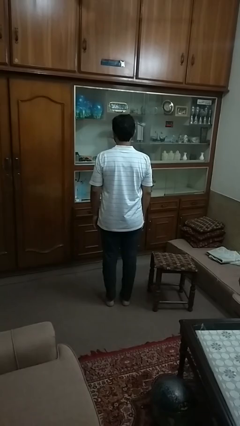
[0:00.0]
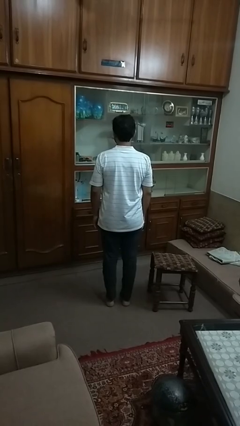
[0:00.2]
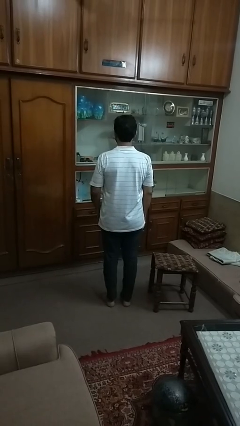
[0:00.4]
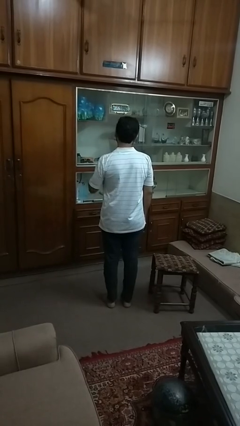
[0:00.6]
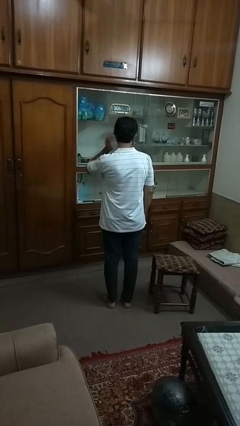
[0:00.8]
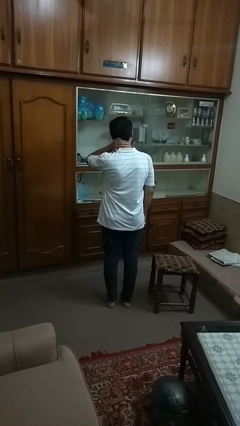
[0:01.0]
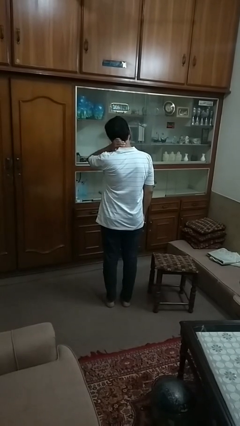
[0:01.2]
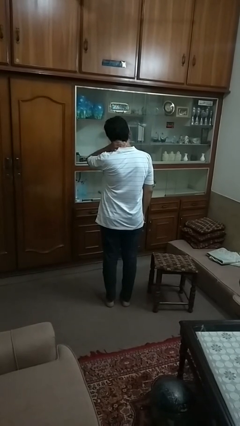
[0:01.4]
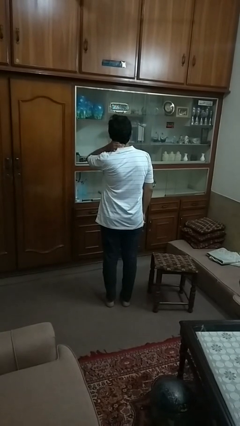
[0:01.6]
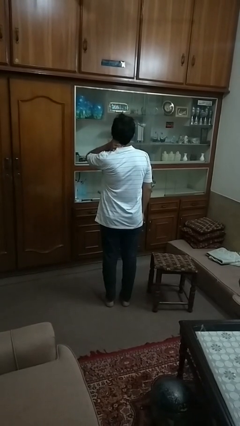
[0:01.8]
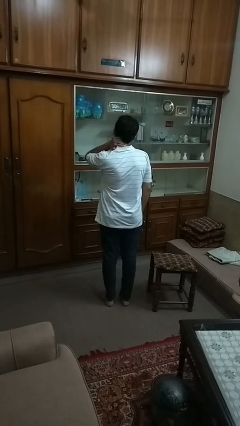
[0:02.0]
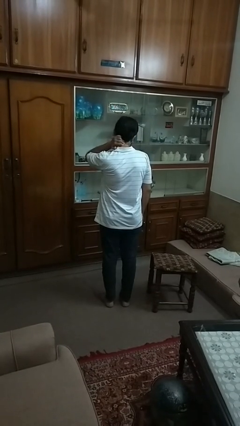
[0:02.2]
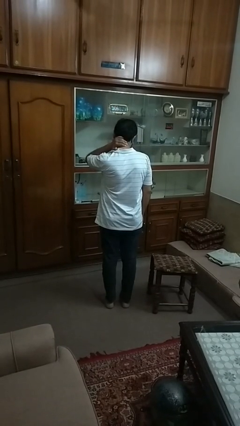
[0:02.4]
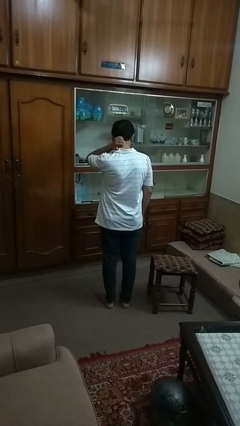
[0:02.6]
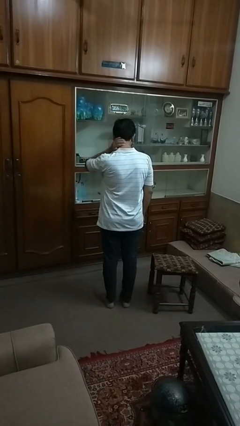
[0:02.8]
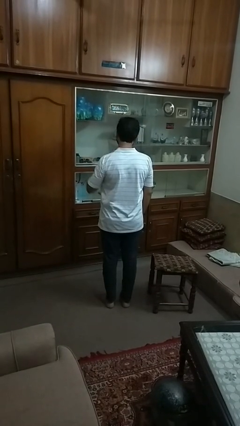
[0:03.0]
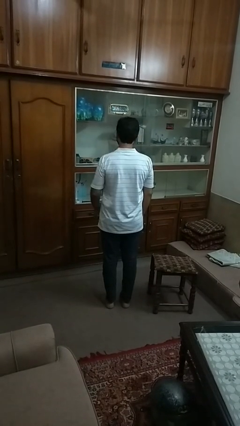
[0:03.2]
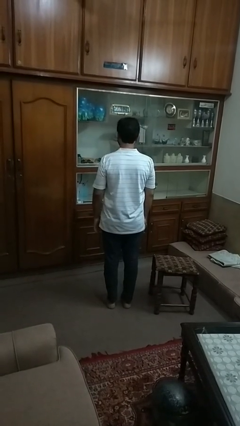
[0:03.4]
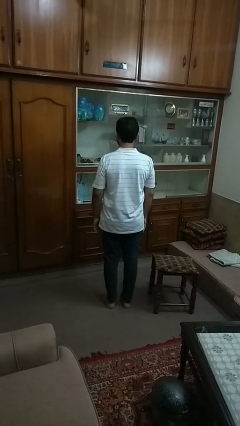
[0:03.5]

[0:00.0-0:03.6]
person rubs neck

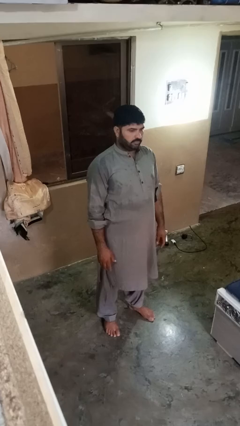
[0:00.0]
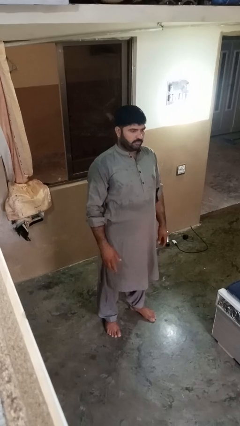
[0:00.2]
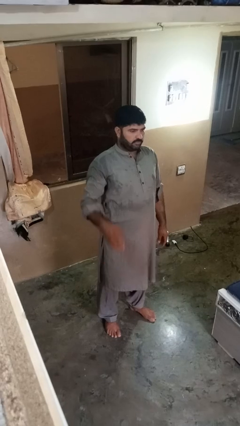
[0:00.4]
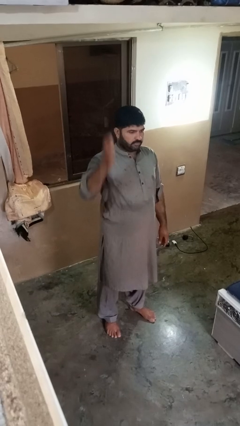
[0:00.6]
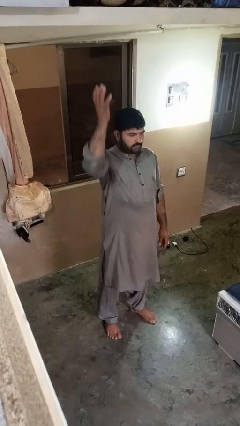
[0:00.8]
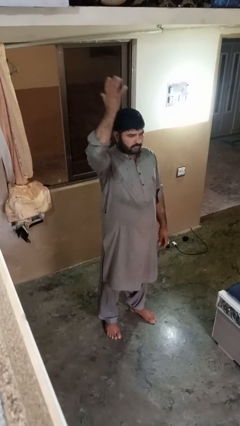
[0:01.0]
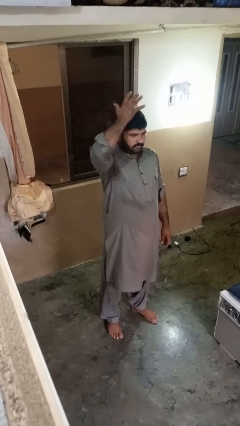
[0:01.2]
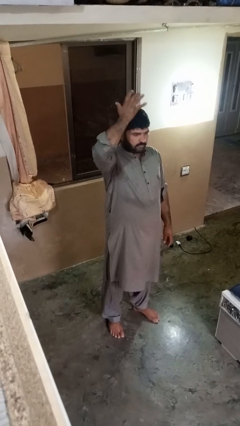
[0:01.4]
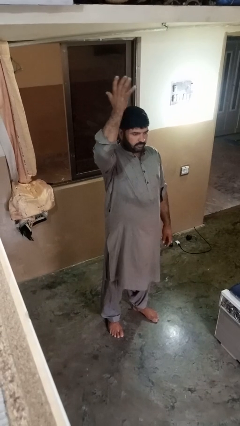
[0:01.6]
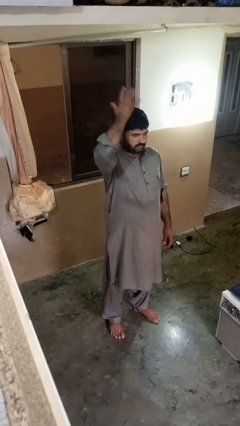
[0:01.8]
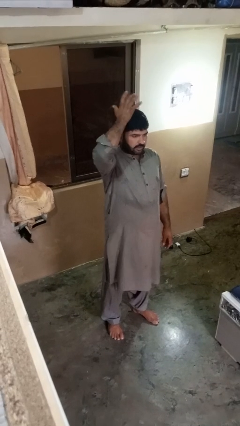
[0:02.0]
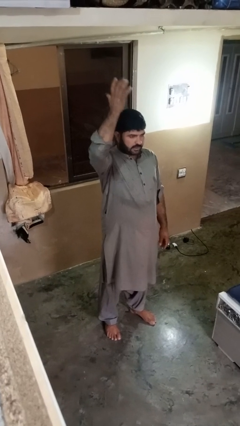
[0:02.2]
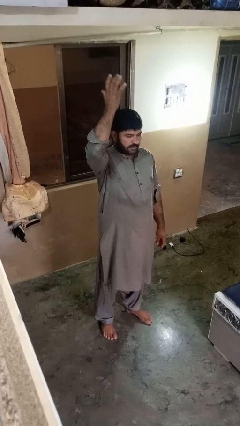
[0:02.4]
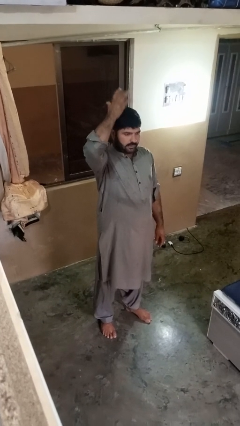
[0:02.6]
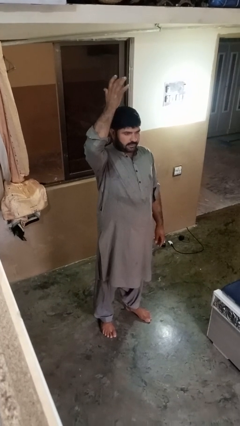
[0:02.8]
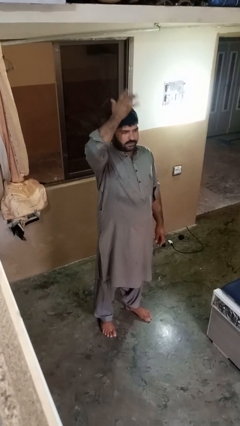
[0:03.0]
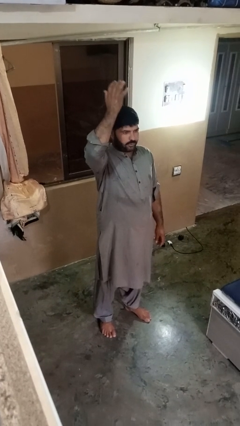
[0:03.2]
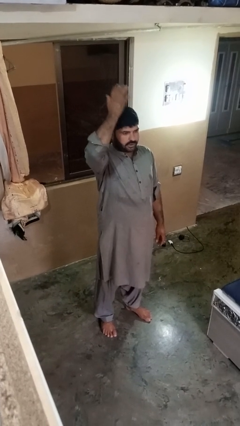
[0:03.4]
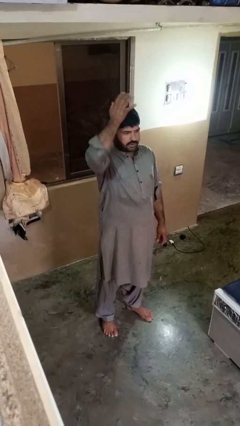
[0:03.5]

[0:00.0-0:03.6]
person pats head

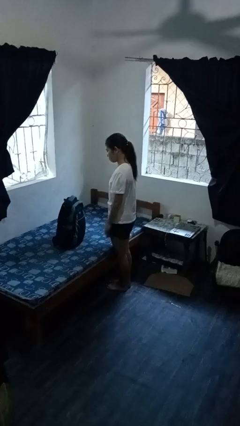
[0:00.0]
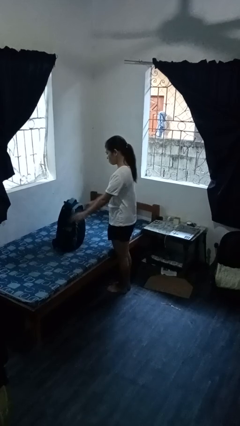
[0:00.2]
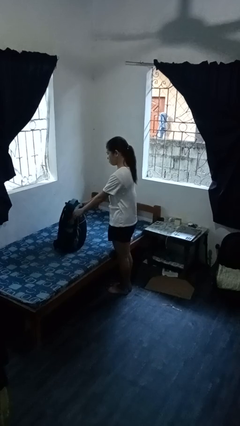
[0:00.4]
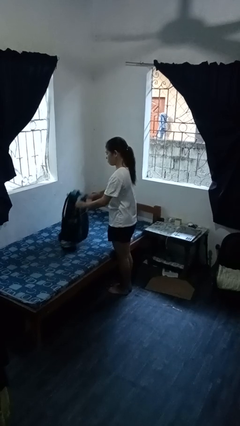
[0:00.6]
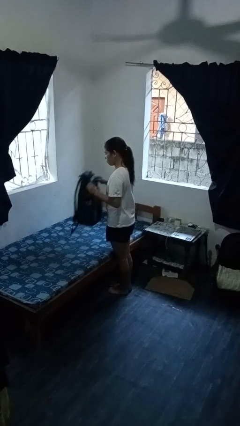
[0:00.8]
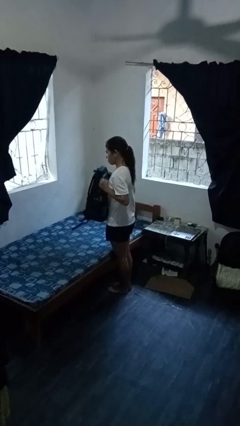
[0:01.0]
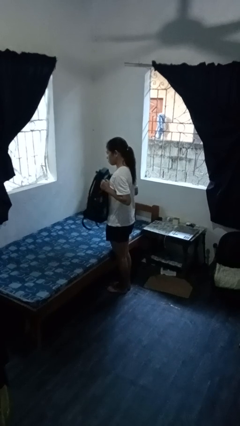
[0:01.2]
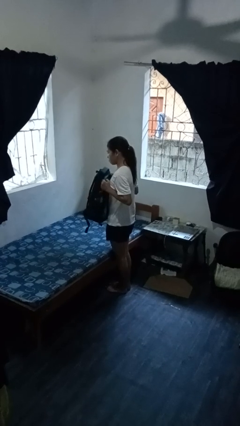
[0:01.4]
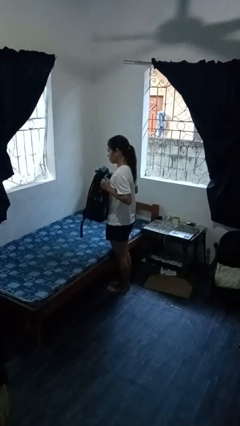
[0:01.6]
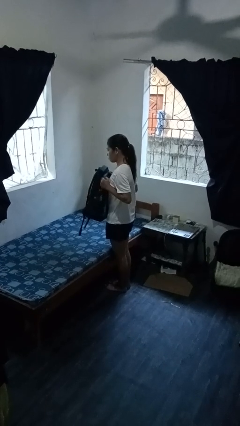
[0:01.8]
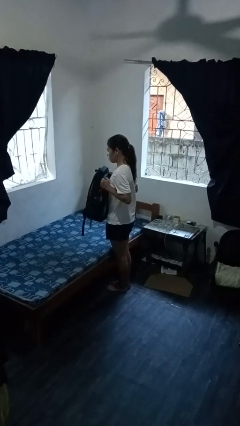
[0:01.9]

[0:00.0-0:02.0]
person picks up object from bed

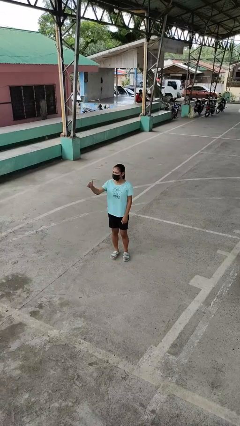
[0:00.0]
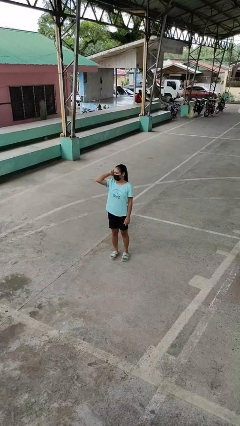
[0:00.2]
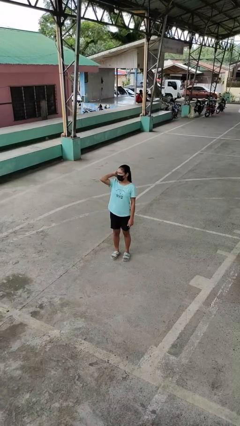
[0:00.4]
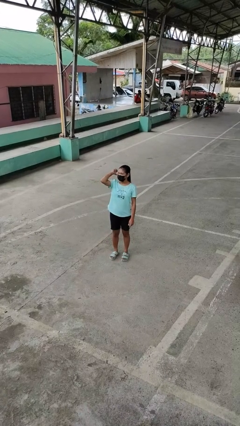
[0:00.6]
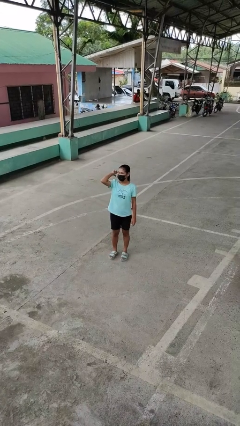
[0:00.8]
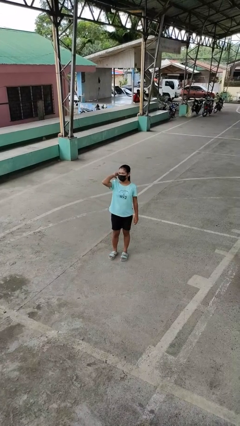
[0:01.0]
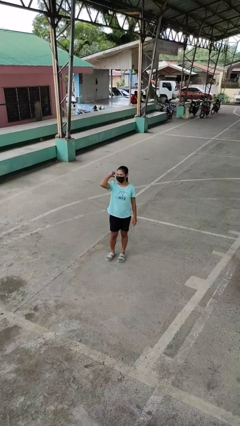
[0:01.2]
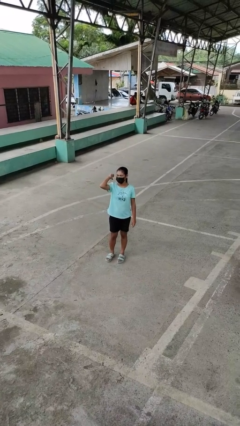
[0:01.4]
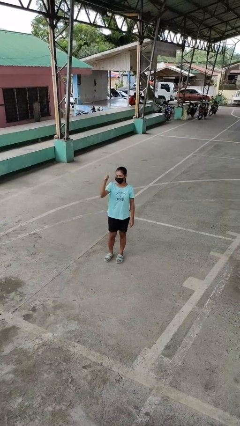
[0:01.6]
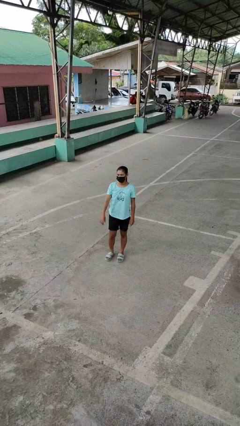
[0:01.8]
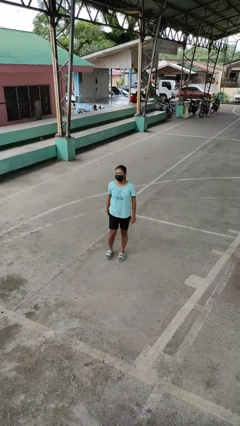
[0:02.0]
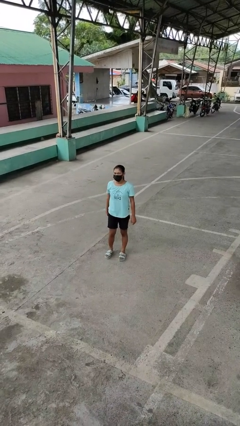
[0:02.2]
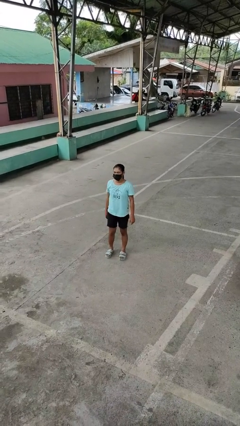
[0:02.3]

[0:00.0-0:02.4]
person gestures behind me

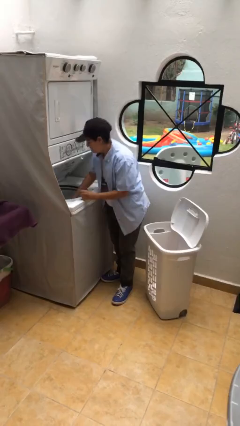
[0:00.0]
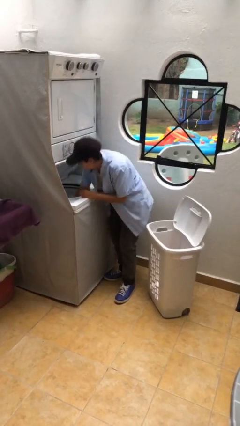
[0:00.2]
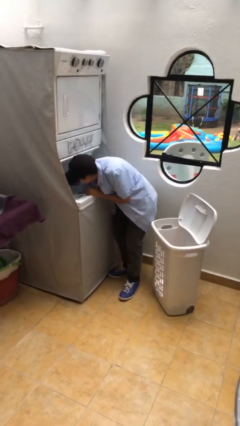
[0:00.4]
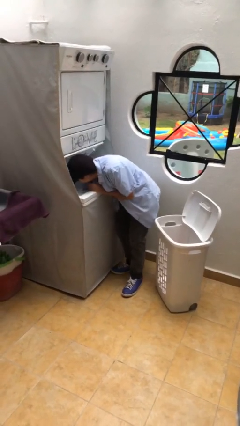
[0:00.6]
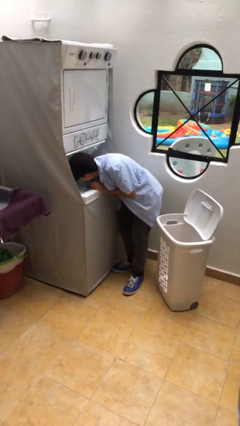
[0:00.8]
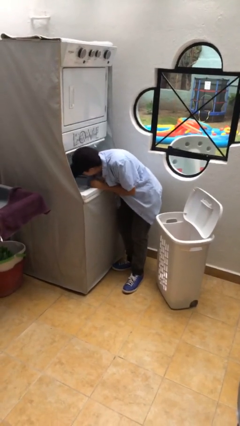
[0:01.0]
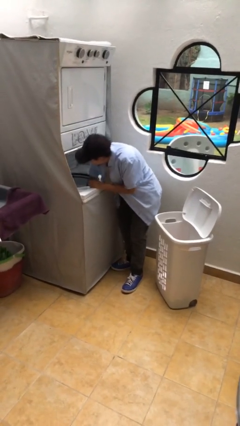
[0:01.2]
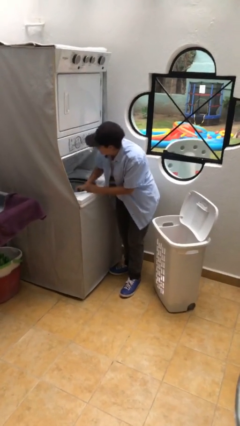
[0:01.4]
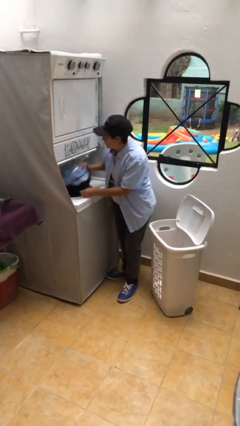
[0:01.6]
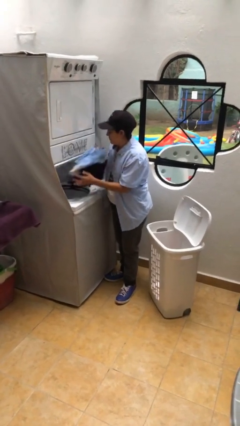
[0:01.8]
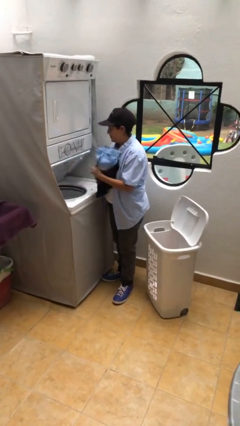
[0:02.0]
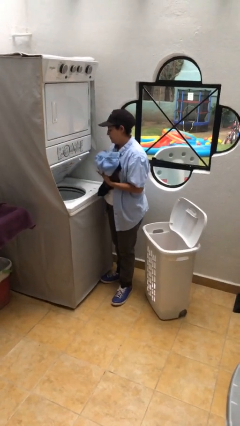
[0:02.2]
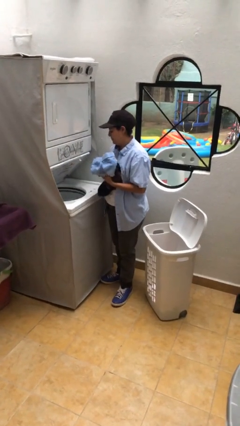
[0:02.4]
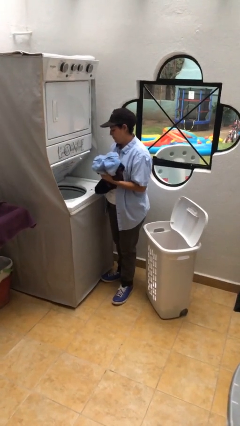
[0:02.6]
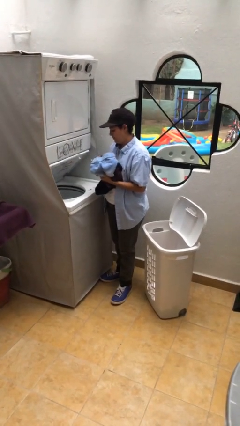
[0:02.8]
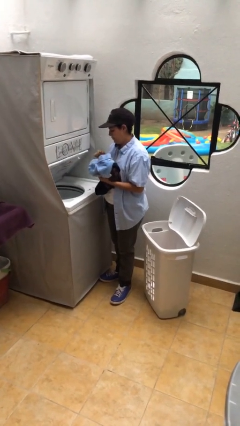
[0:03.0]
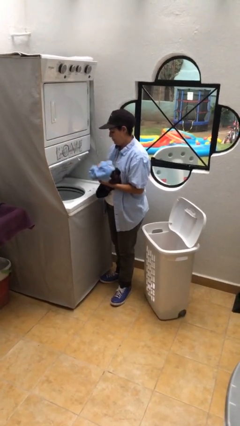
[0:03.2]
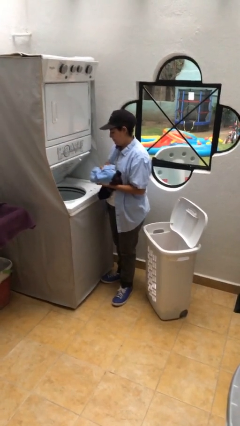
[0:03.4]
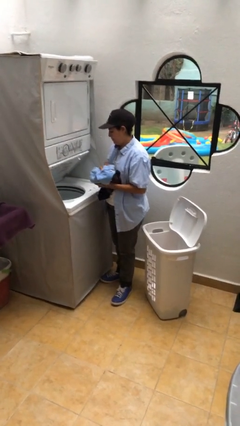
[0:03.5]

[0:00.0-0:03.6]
person unloads clotheswasher

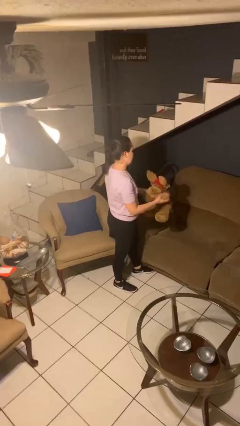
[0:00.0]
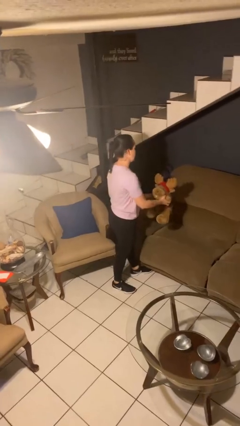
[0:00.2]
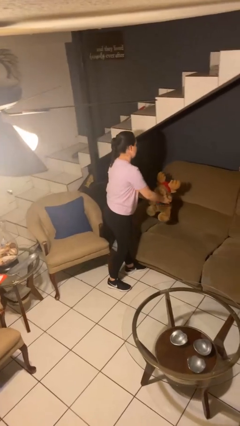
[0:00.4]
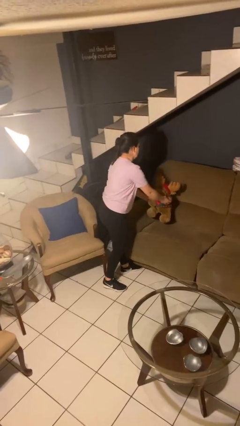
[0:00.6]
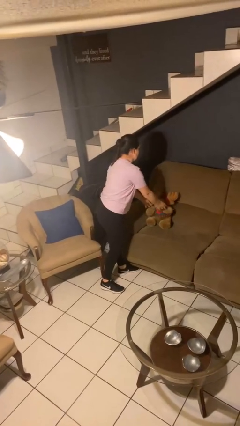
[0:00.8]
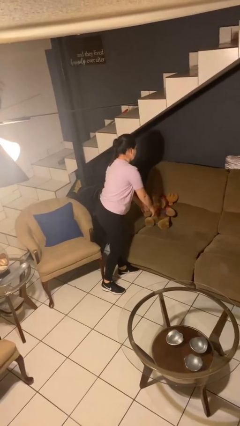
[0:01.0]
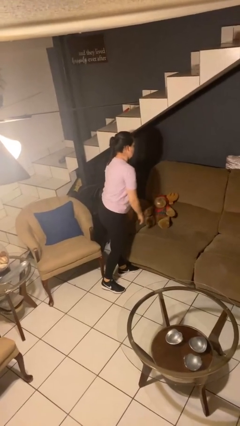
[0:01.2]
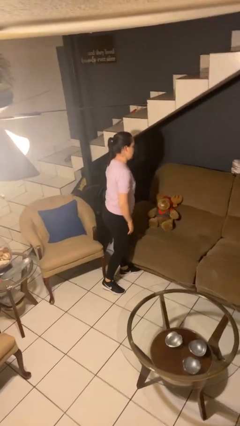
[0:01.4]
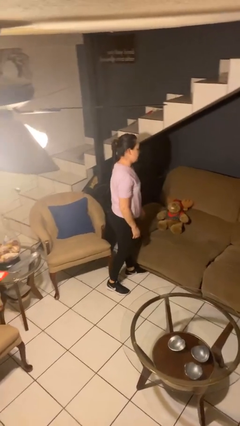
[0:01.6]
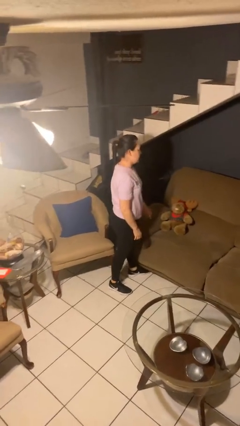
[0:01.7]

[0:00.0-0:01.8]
person puts down object on couch

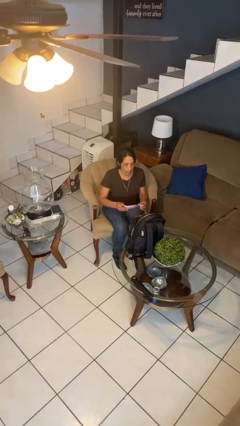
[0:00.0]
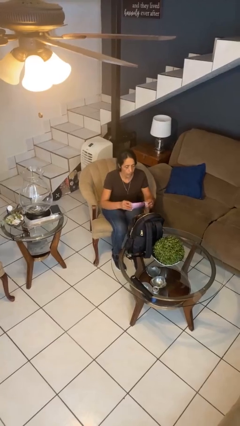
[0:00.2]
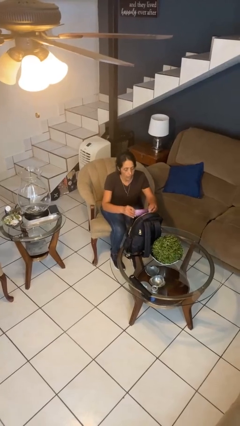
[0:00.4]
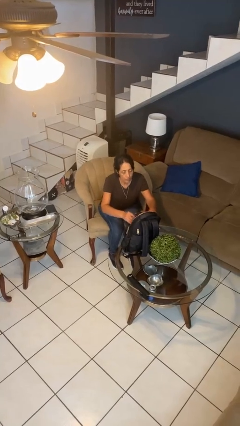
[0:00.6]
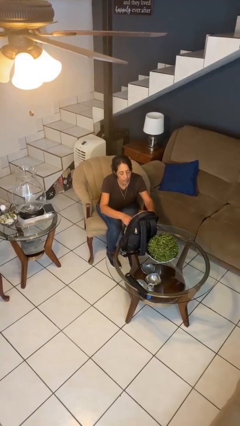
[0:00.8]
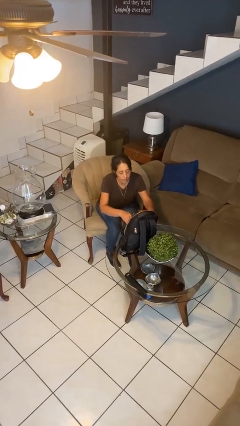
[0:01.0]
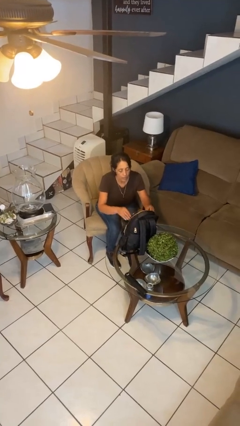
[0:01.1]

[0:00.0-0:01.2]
person puts object into backpack
